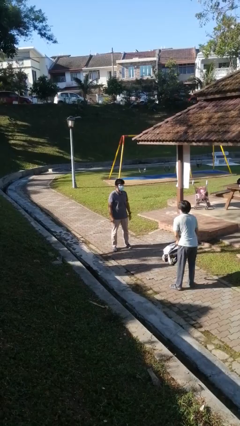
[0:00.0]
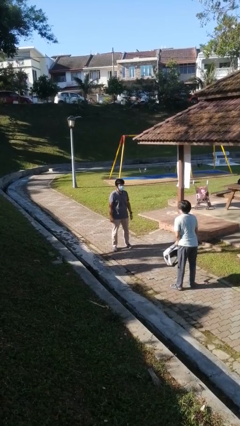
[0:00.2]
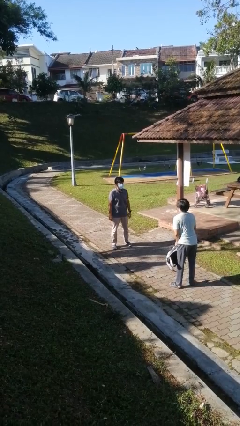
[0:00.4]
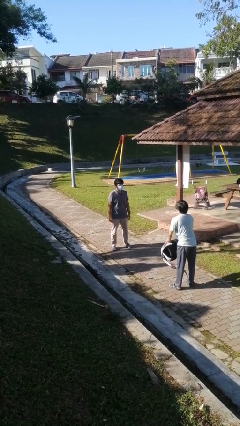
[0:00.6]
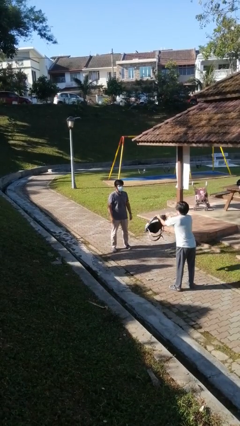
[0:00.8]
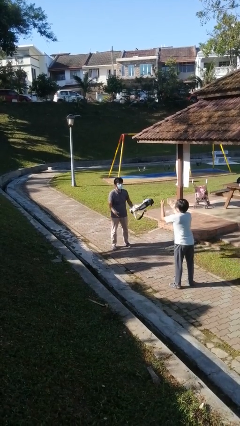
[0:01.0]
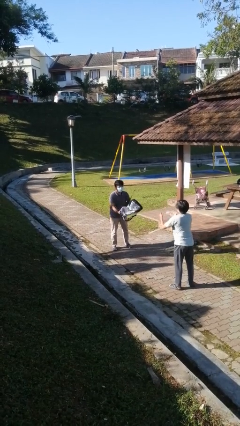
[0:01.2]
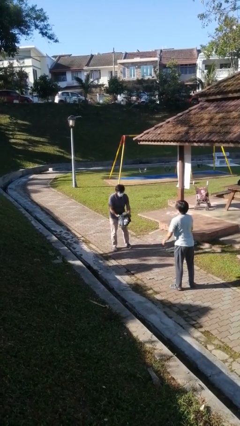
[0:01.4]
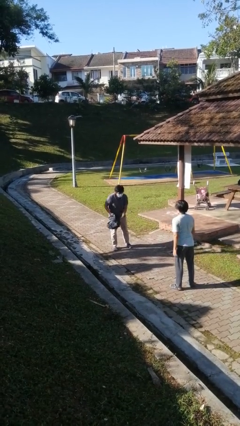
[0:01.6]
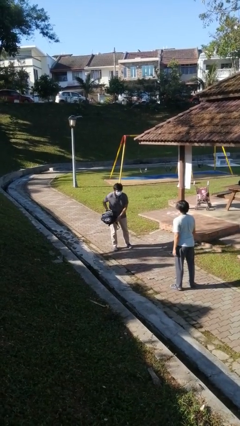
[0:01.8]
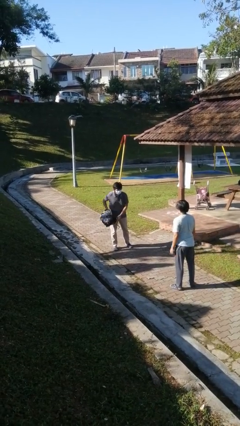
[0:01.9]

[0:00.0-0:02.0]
person catches object from person

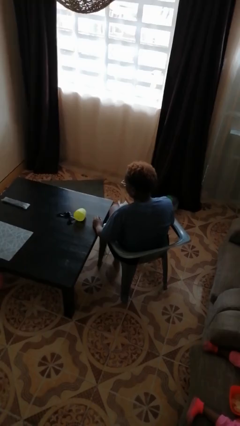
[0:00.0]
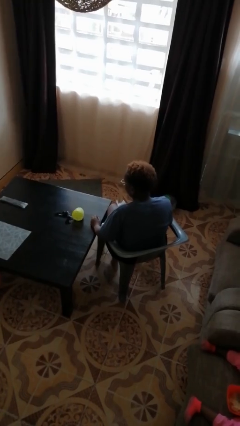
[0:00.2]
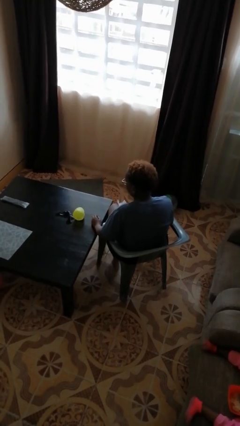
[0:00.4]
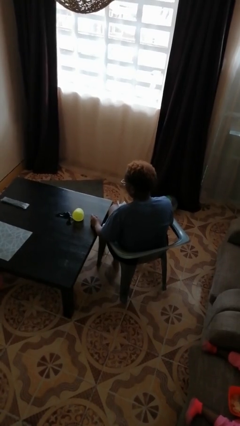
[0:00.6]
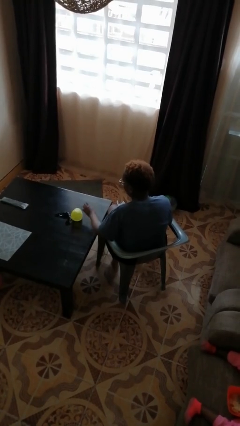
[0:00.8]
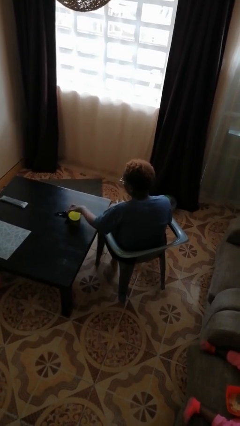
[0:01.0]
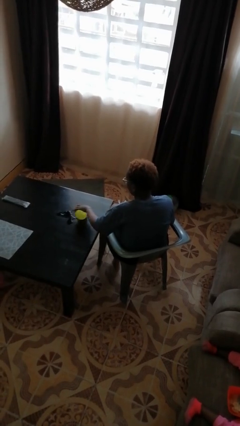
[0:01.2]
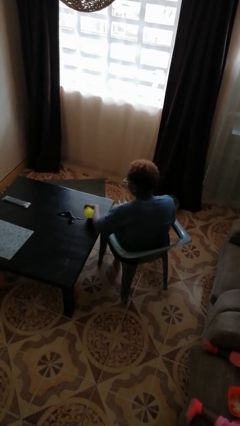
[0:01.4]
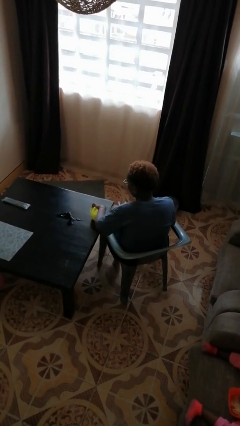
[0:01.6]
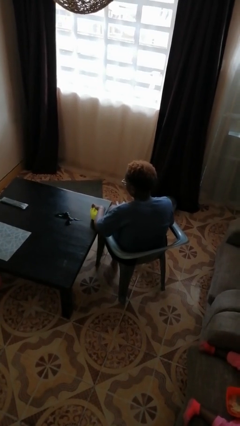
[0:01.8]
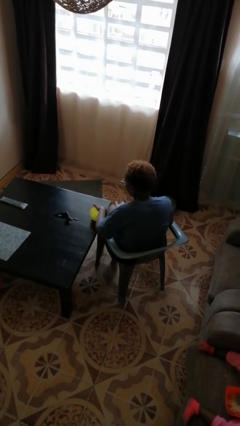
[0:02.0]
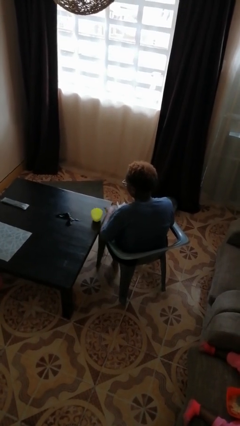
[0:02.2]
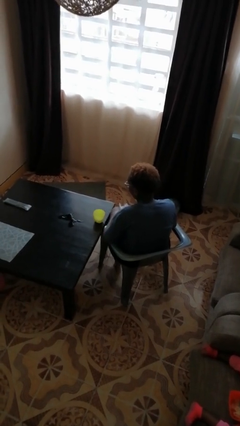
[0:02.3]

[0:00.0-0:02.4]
person sets upright glass

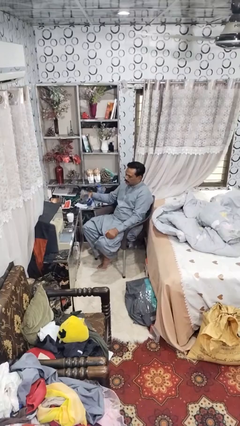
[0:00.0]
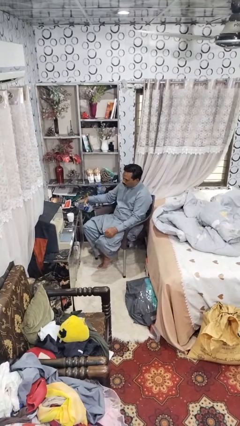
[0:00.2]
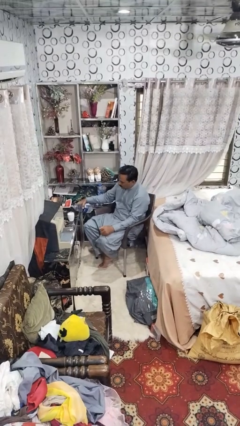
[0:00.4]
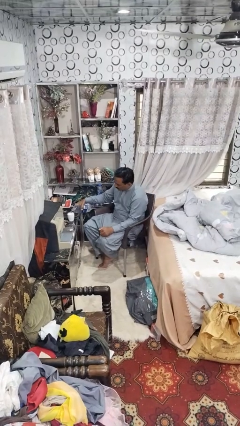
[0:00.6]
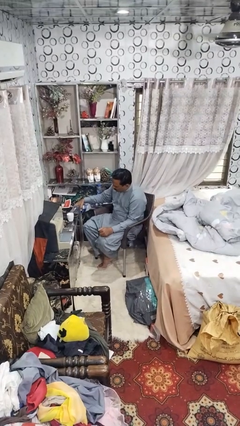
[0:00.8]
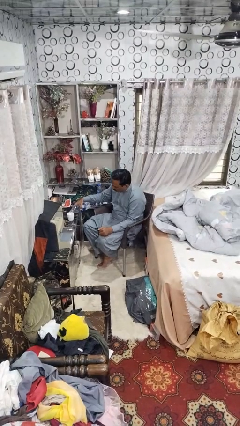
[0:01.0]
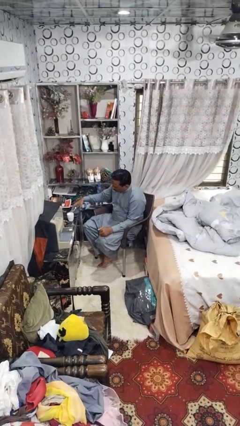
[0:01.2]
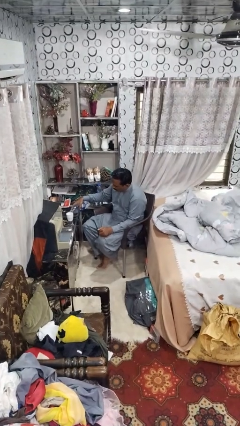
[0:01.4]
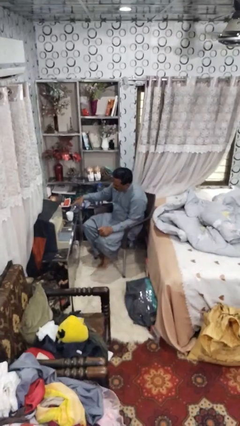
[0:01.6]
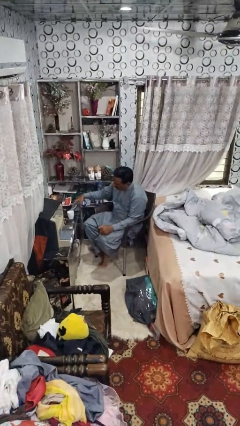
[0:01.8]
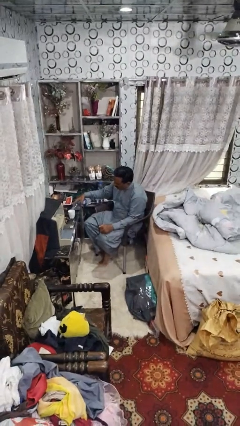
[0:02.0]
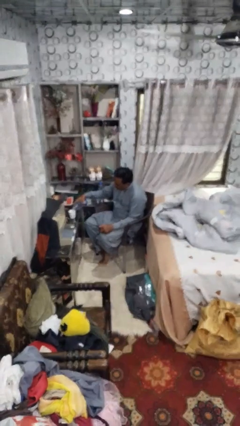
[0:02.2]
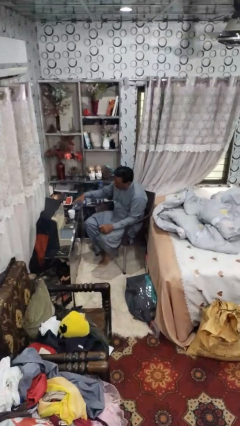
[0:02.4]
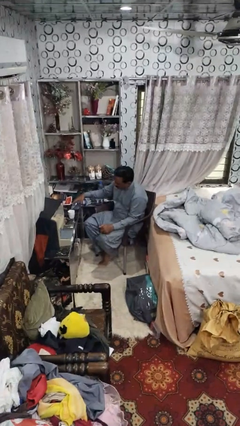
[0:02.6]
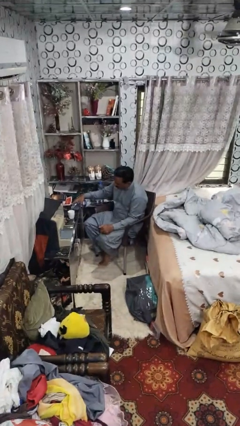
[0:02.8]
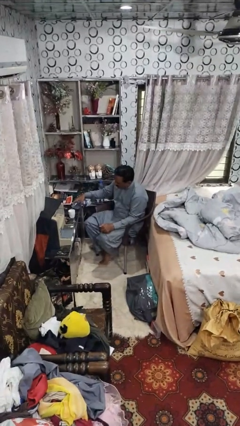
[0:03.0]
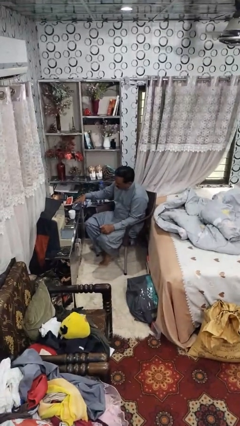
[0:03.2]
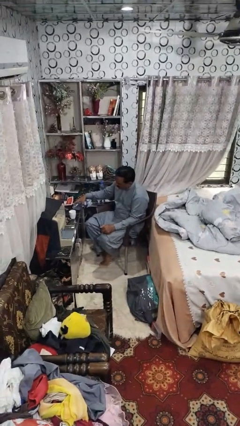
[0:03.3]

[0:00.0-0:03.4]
person pours liquid into cup

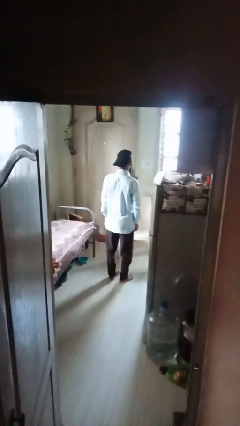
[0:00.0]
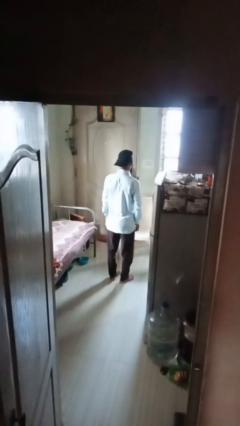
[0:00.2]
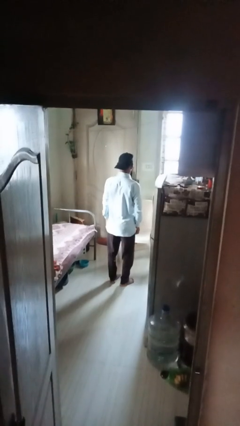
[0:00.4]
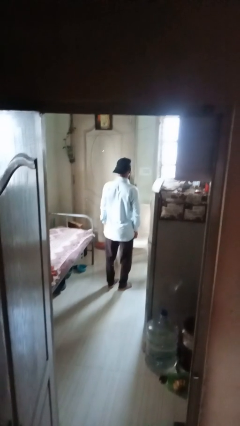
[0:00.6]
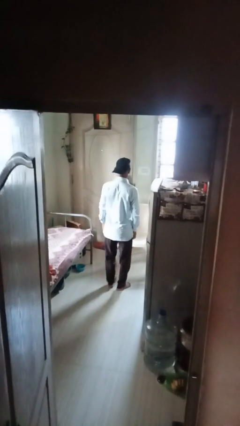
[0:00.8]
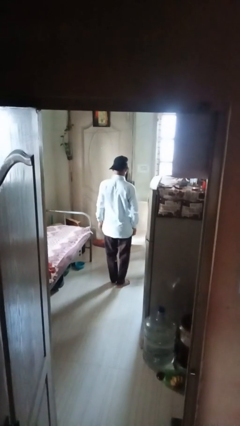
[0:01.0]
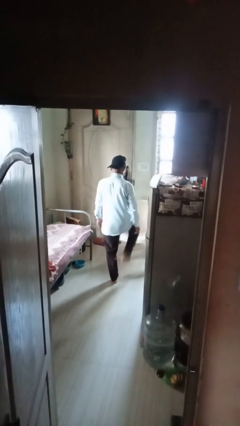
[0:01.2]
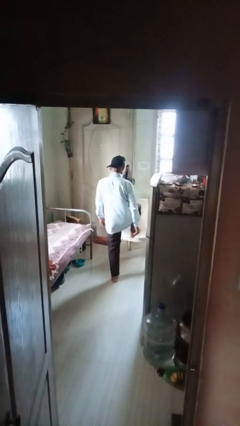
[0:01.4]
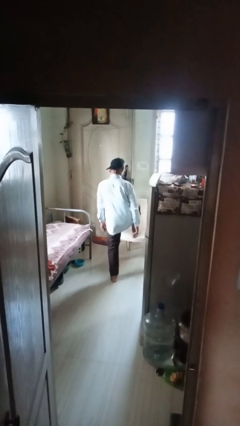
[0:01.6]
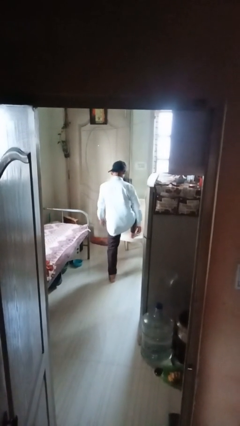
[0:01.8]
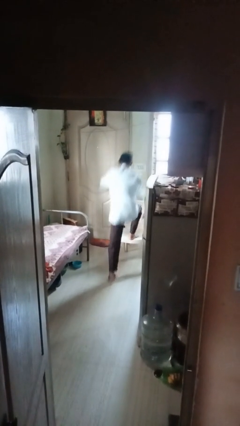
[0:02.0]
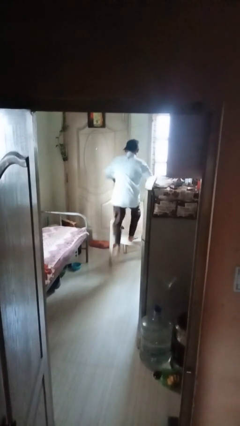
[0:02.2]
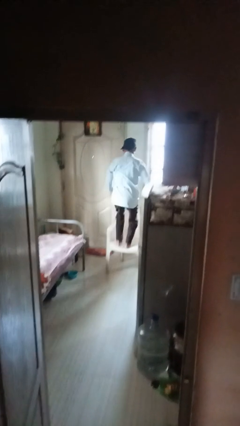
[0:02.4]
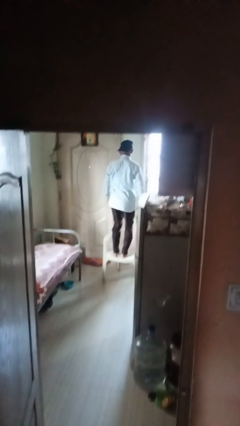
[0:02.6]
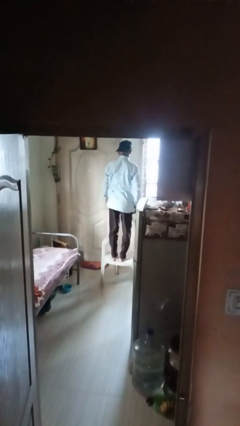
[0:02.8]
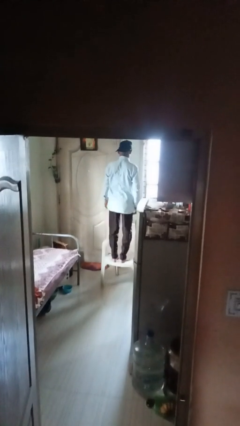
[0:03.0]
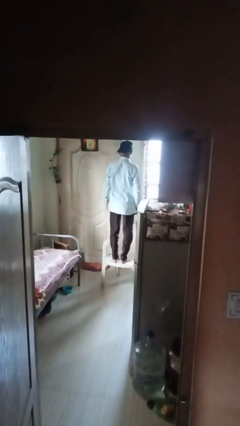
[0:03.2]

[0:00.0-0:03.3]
person climbs on chair

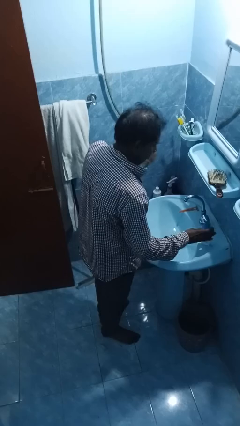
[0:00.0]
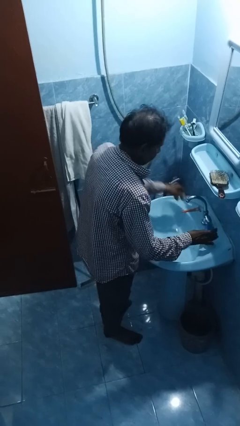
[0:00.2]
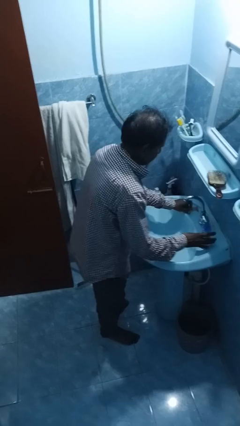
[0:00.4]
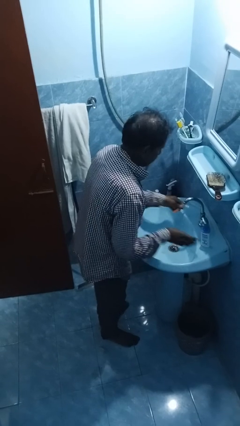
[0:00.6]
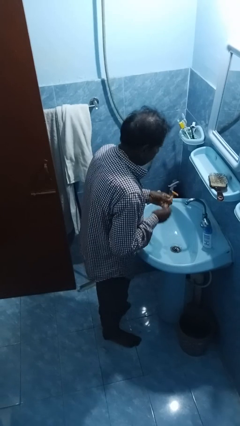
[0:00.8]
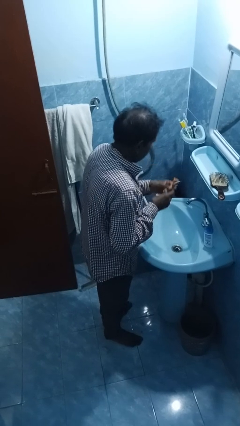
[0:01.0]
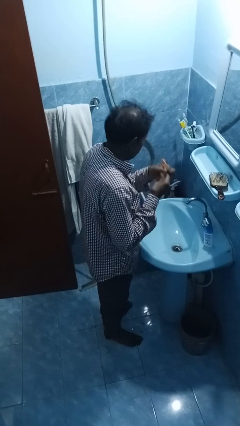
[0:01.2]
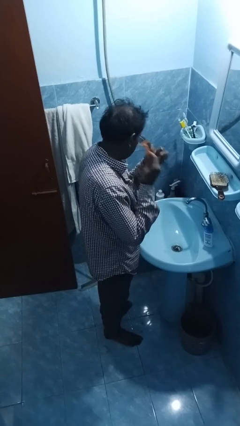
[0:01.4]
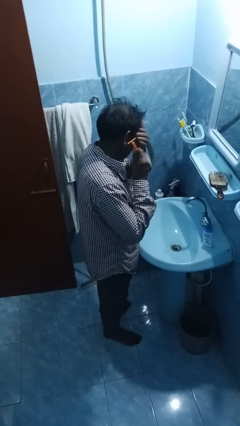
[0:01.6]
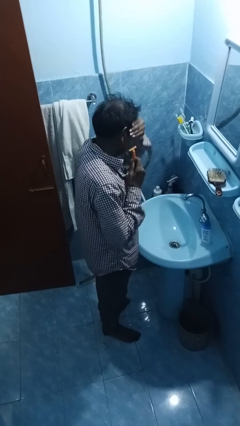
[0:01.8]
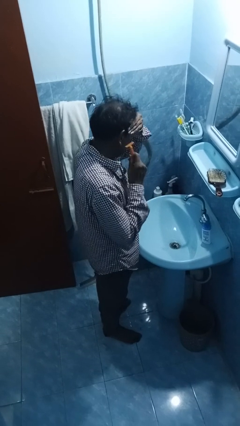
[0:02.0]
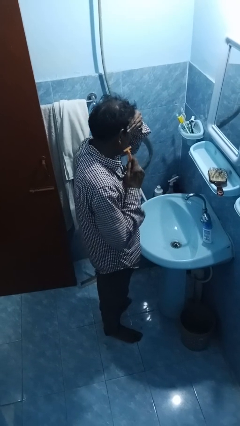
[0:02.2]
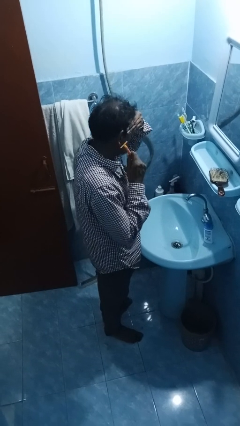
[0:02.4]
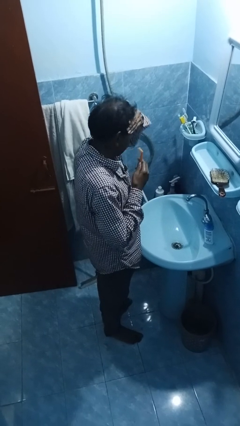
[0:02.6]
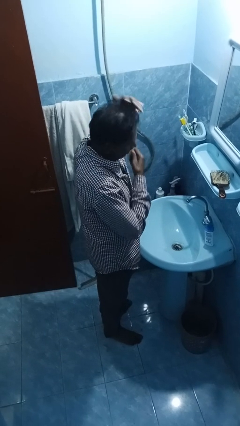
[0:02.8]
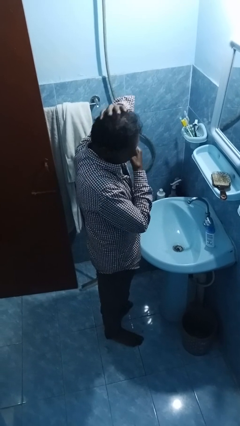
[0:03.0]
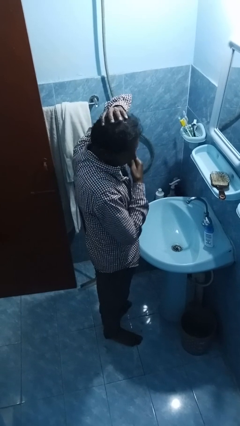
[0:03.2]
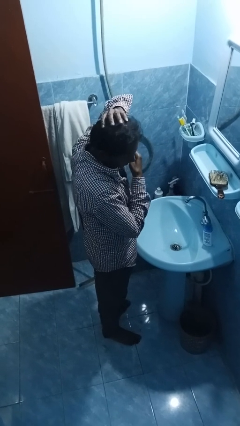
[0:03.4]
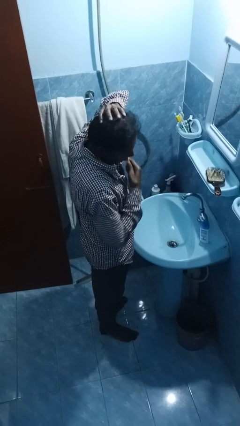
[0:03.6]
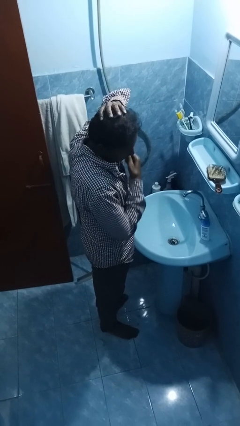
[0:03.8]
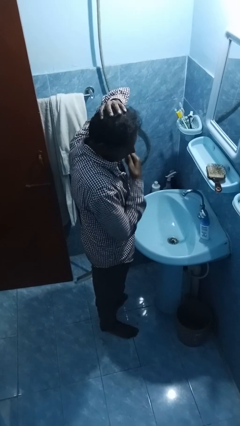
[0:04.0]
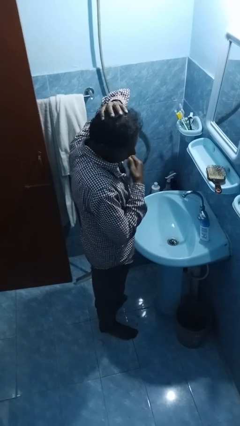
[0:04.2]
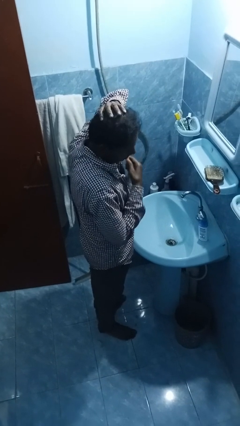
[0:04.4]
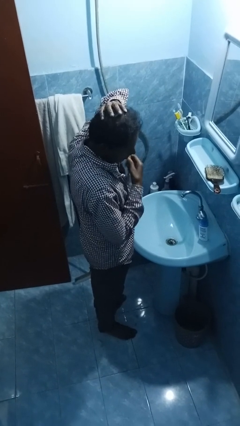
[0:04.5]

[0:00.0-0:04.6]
person shaves face

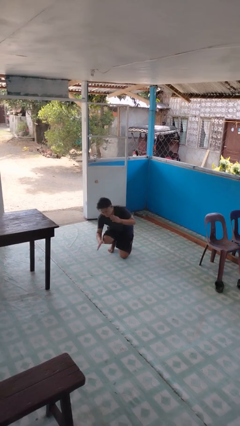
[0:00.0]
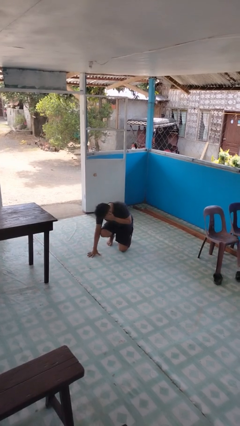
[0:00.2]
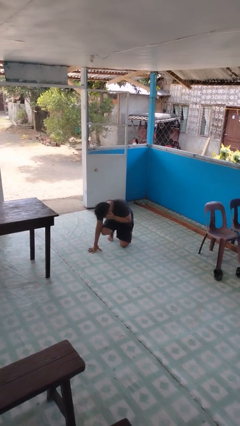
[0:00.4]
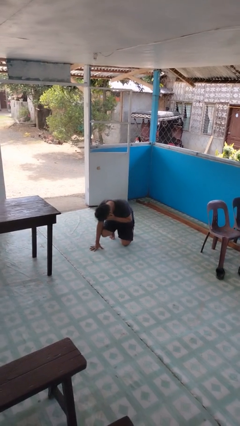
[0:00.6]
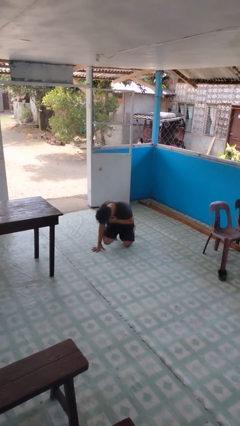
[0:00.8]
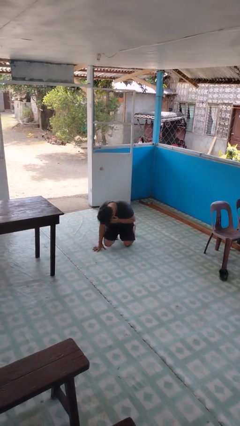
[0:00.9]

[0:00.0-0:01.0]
person falls while standing

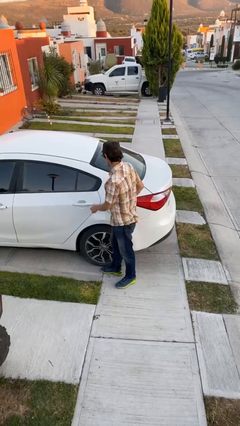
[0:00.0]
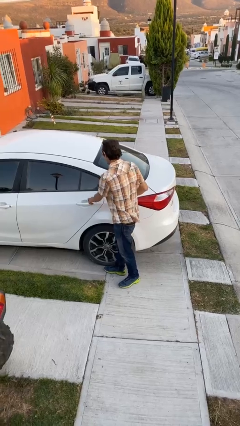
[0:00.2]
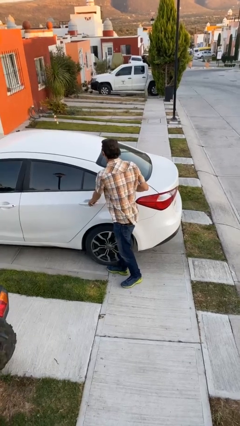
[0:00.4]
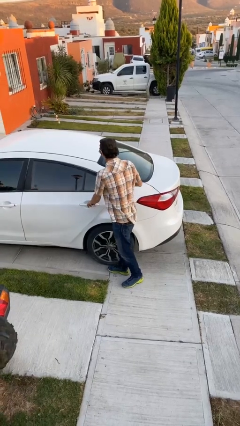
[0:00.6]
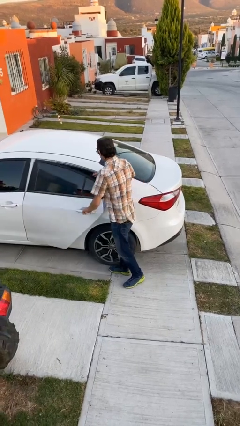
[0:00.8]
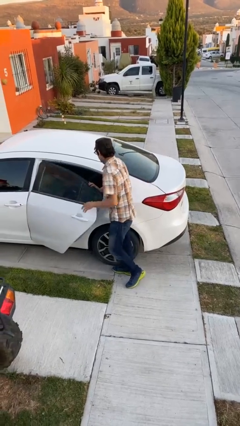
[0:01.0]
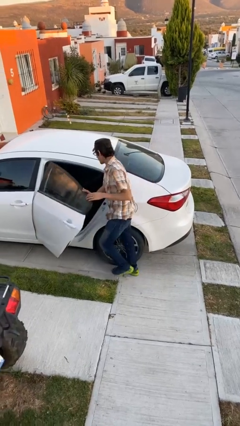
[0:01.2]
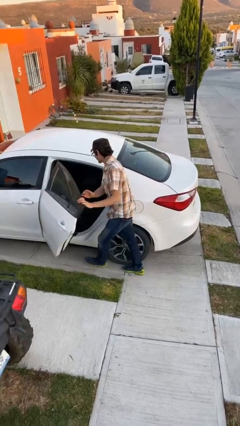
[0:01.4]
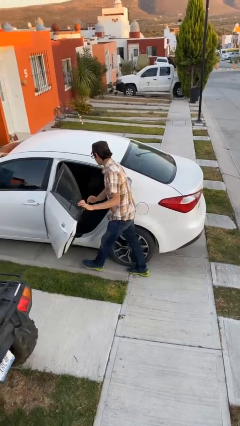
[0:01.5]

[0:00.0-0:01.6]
person opens car door
